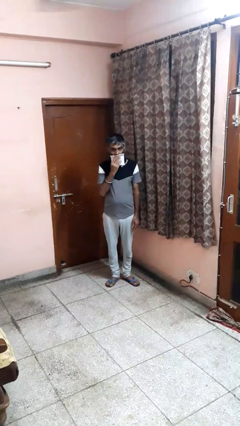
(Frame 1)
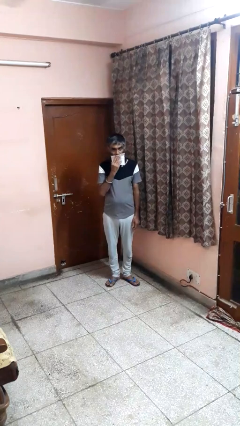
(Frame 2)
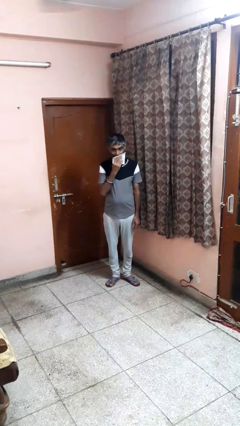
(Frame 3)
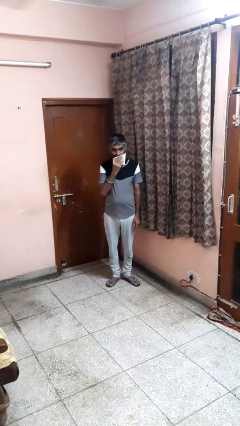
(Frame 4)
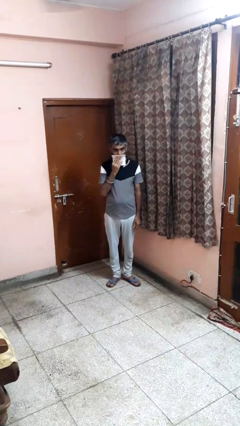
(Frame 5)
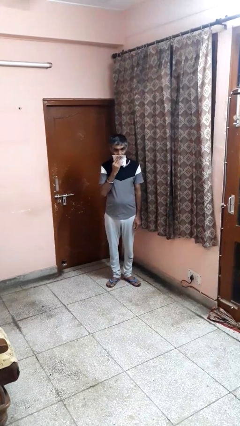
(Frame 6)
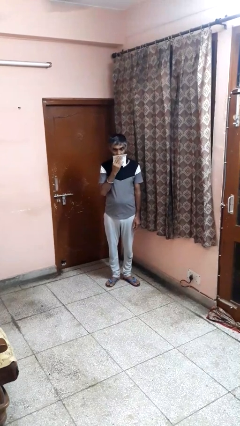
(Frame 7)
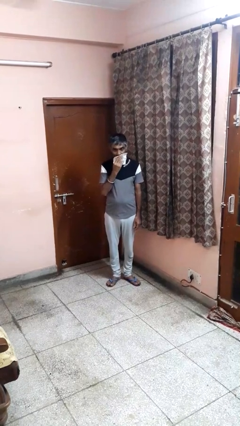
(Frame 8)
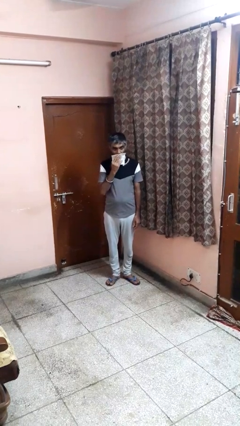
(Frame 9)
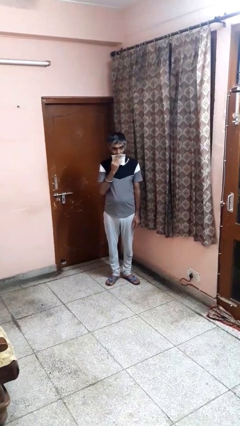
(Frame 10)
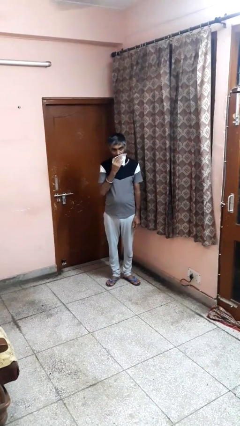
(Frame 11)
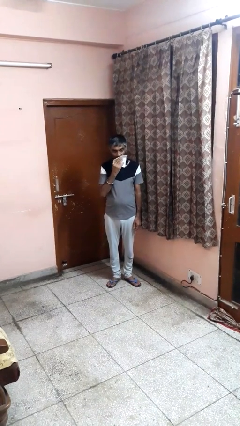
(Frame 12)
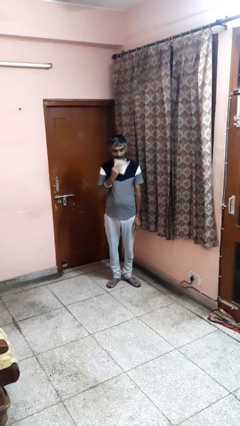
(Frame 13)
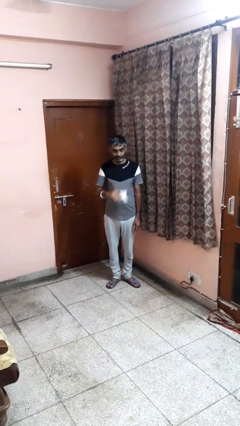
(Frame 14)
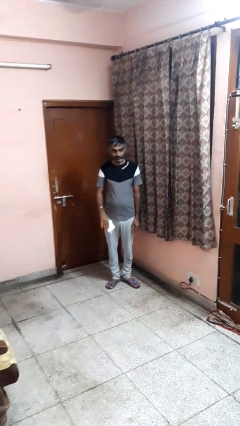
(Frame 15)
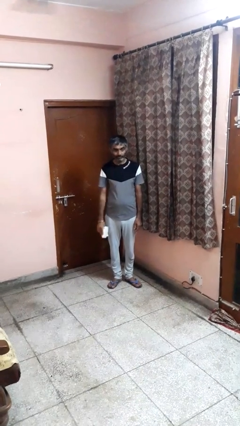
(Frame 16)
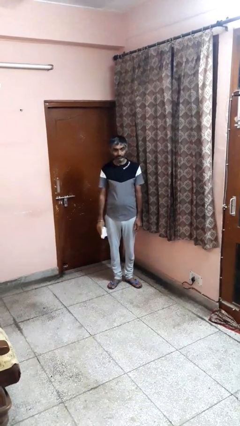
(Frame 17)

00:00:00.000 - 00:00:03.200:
person wipes mouth with napkin

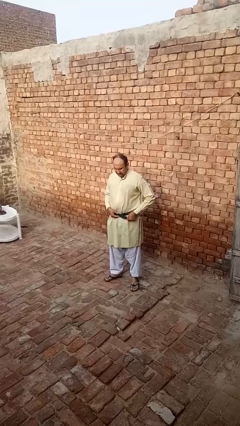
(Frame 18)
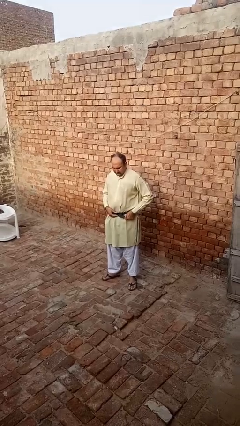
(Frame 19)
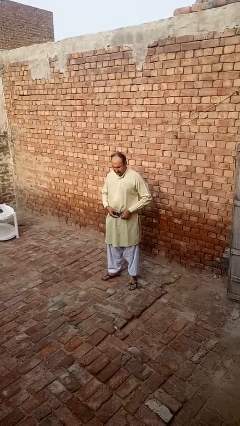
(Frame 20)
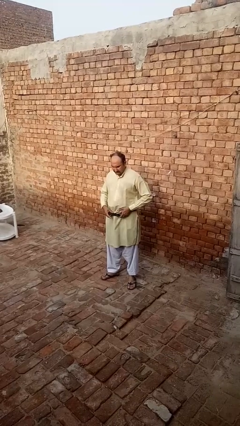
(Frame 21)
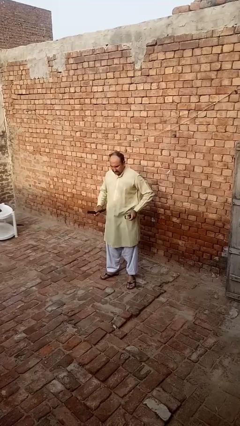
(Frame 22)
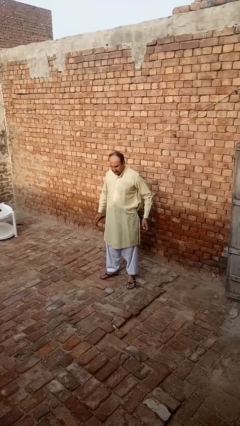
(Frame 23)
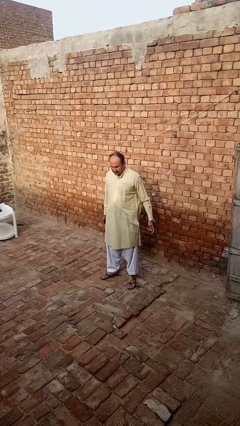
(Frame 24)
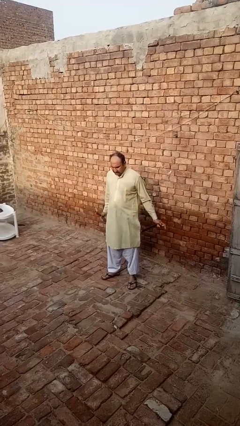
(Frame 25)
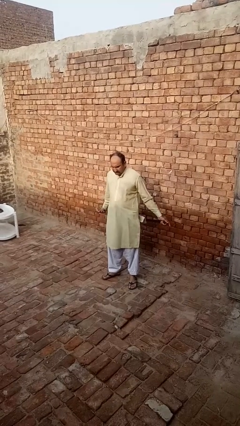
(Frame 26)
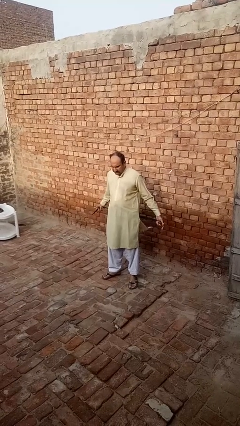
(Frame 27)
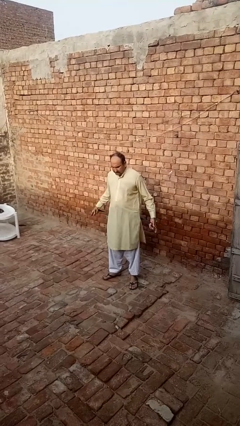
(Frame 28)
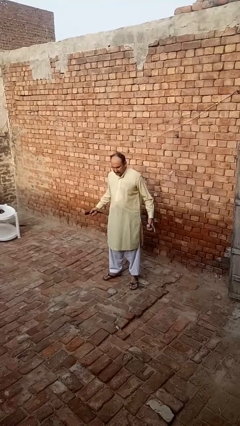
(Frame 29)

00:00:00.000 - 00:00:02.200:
person takes off belt

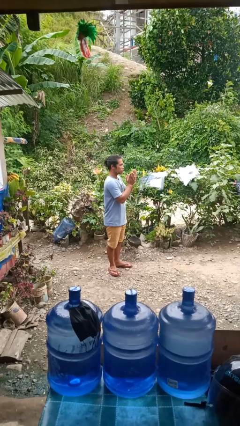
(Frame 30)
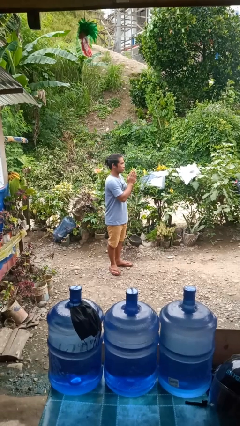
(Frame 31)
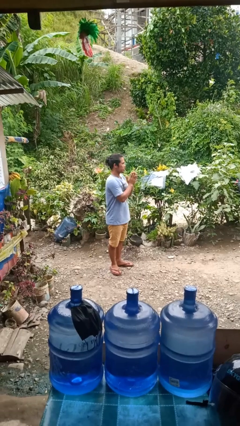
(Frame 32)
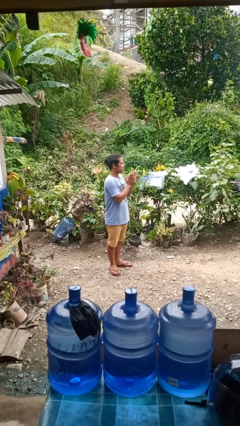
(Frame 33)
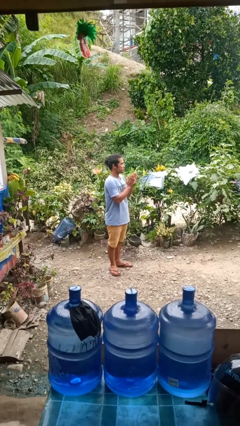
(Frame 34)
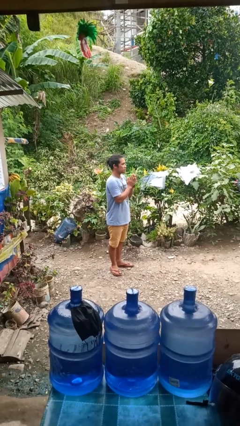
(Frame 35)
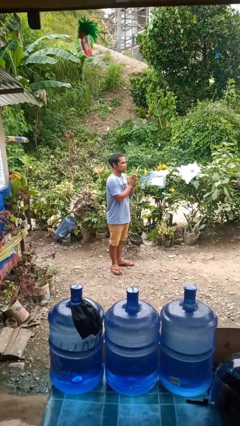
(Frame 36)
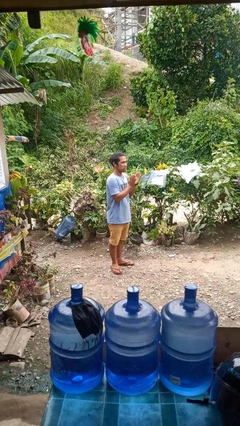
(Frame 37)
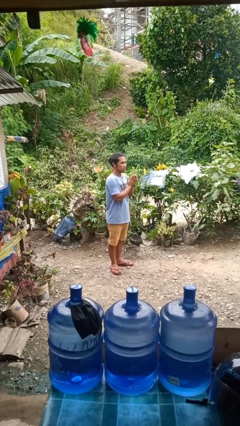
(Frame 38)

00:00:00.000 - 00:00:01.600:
person claps hands

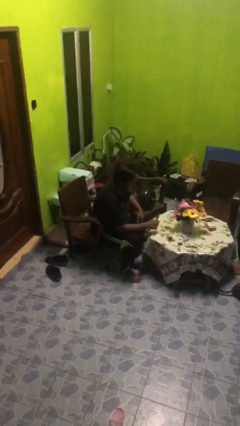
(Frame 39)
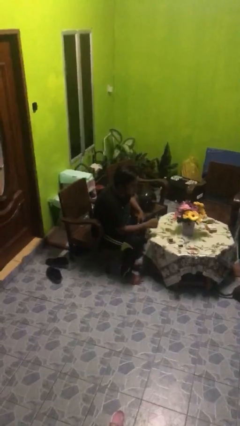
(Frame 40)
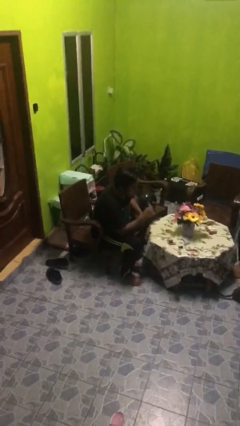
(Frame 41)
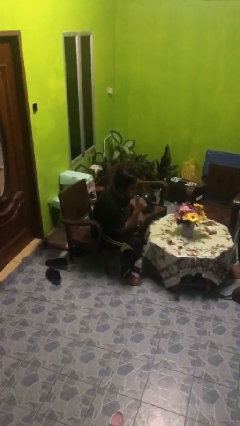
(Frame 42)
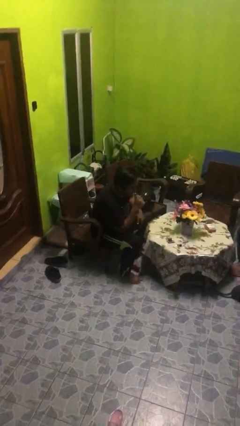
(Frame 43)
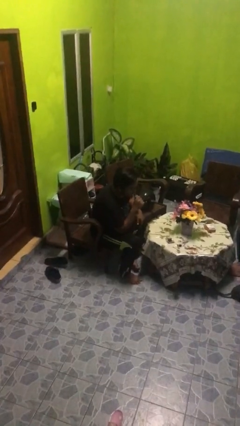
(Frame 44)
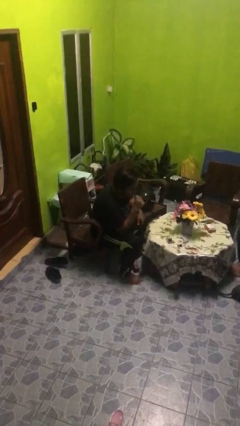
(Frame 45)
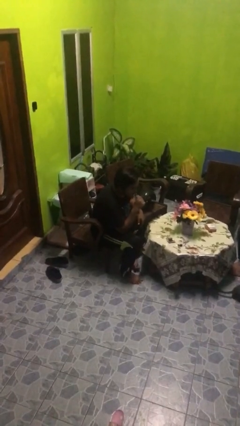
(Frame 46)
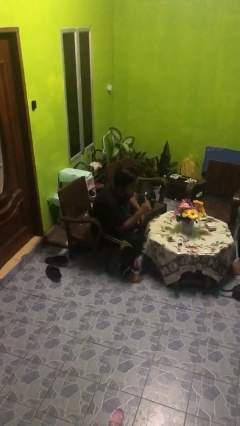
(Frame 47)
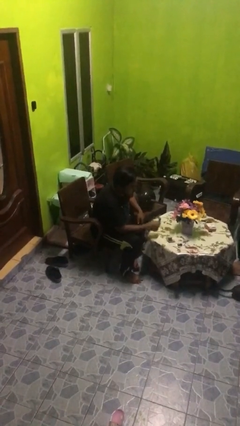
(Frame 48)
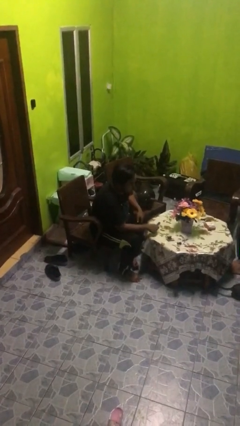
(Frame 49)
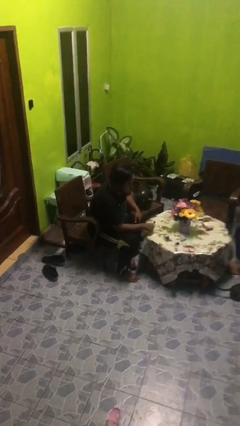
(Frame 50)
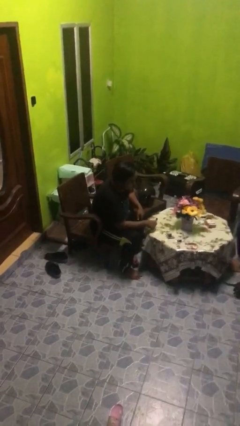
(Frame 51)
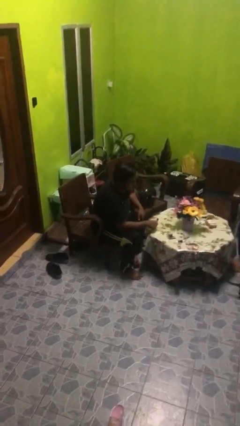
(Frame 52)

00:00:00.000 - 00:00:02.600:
person vapes

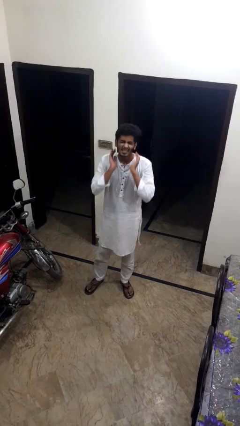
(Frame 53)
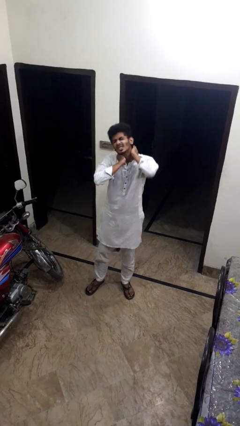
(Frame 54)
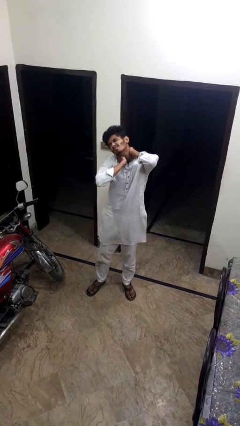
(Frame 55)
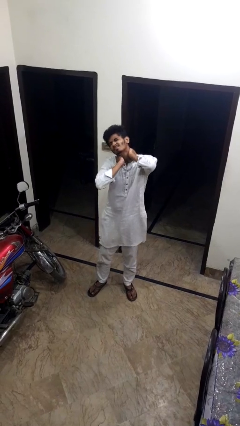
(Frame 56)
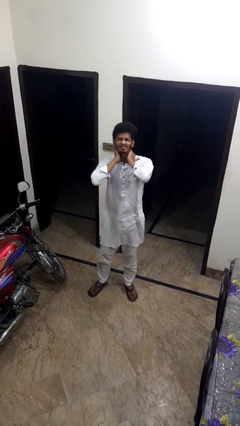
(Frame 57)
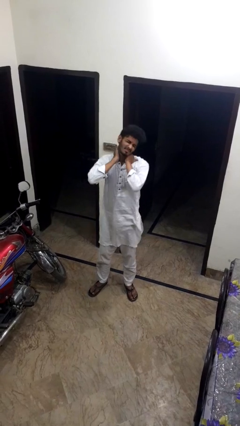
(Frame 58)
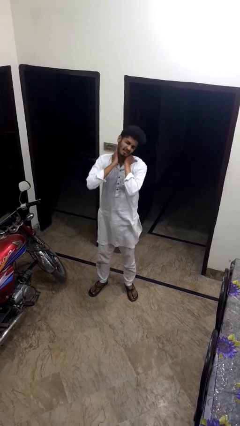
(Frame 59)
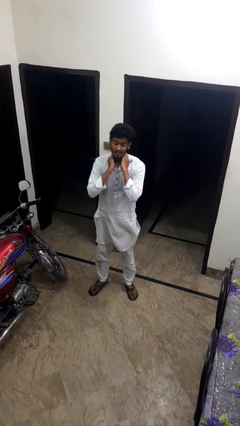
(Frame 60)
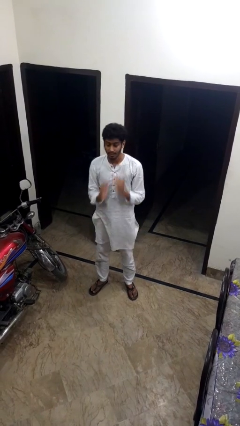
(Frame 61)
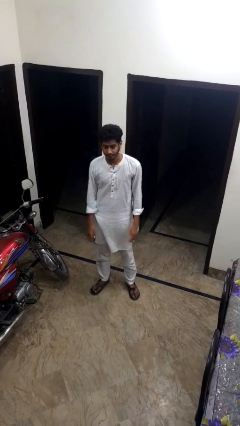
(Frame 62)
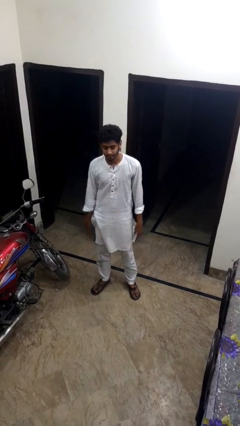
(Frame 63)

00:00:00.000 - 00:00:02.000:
person rubs neck

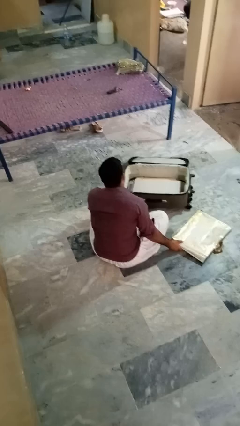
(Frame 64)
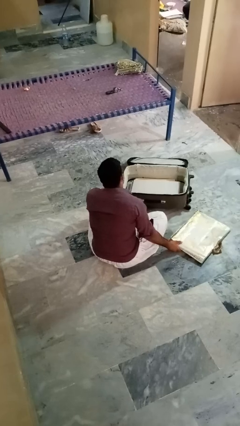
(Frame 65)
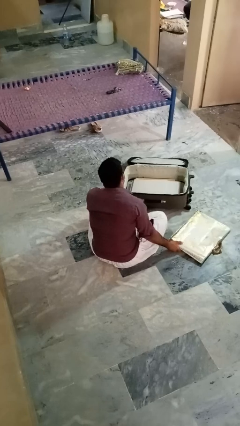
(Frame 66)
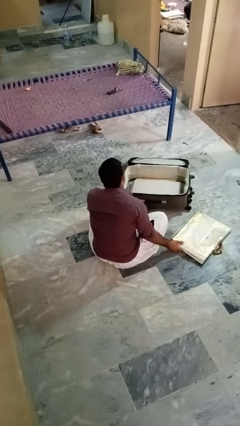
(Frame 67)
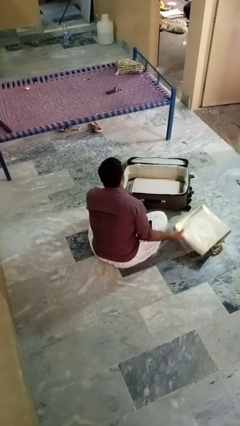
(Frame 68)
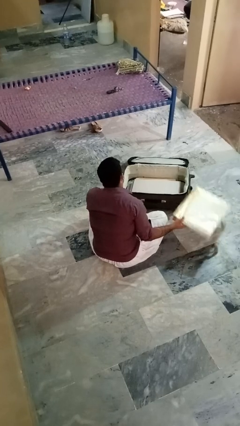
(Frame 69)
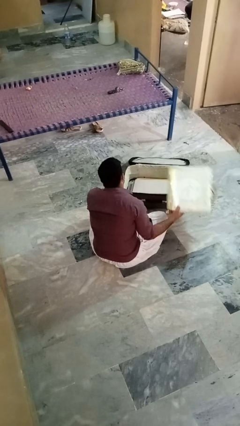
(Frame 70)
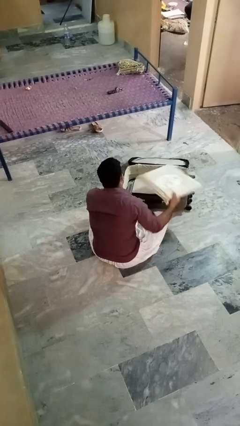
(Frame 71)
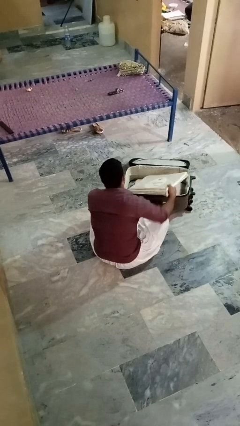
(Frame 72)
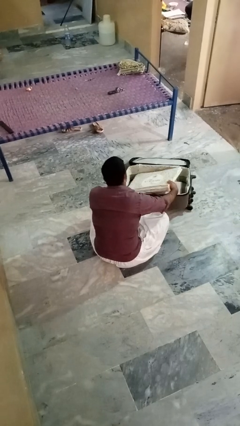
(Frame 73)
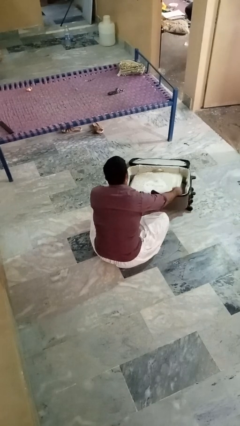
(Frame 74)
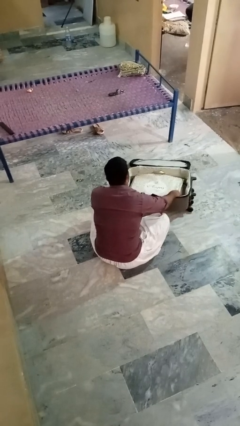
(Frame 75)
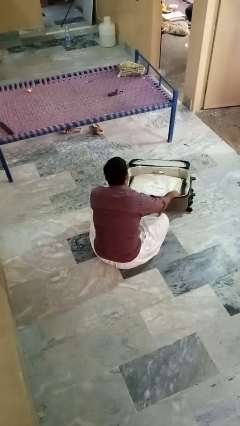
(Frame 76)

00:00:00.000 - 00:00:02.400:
person puts object into bag

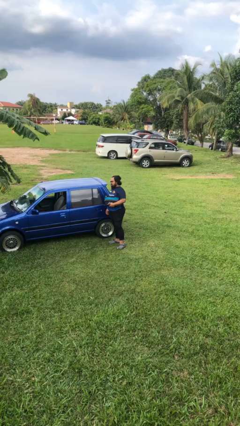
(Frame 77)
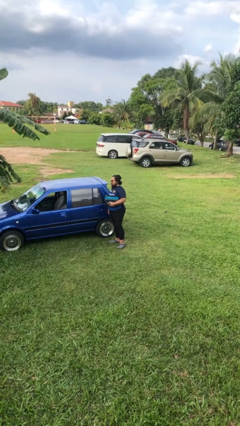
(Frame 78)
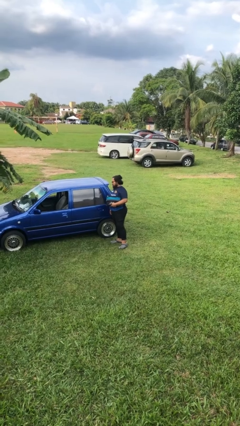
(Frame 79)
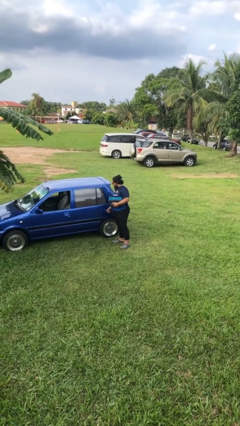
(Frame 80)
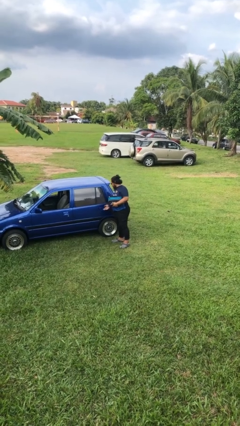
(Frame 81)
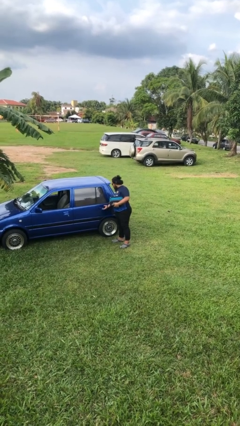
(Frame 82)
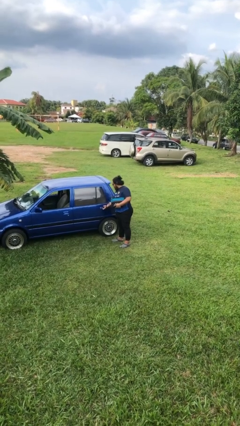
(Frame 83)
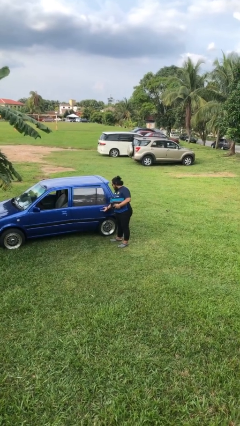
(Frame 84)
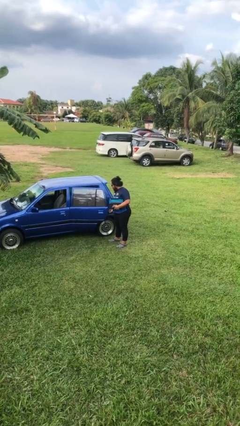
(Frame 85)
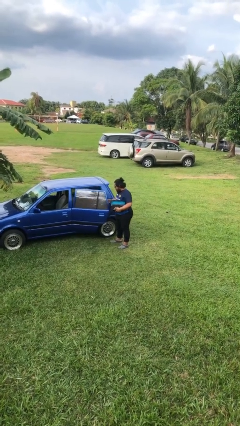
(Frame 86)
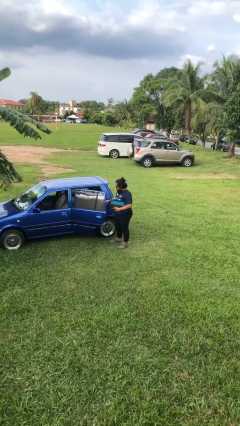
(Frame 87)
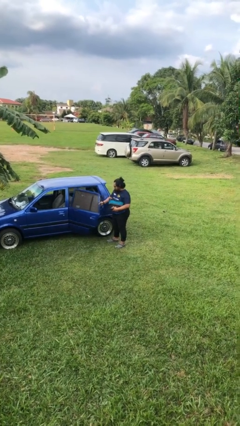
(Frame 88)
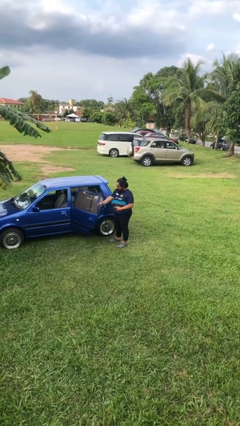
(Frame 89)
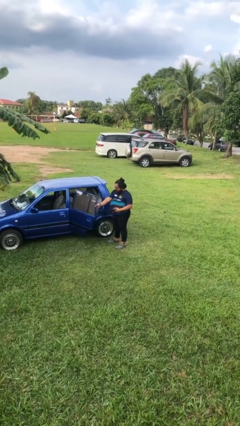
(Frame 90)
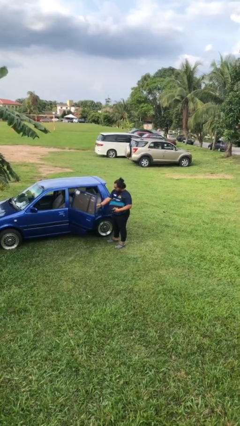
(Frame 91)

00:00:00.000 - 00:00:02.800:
person opens car door

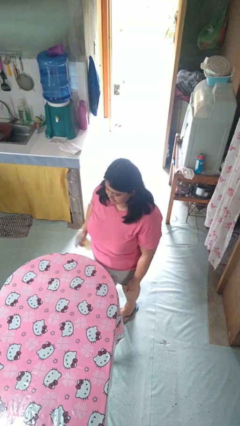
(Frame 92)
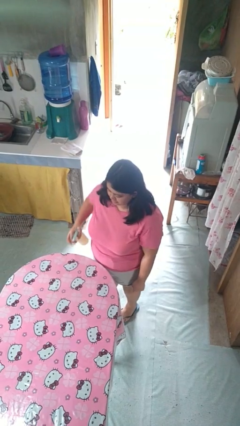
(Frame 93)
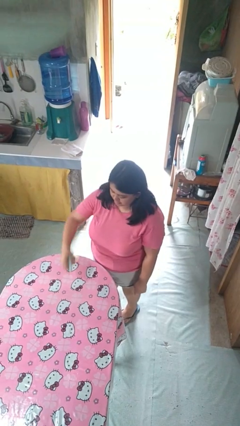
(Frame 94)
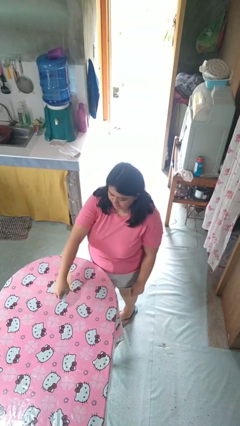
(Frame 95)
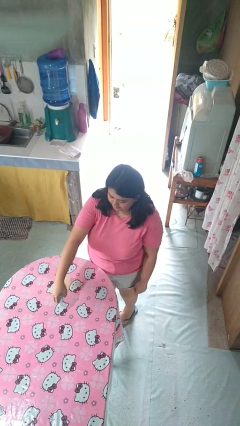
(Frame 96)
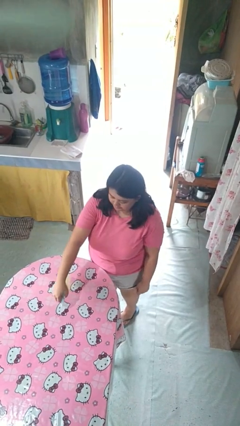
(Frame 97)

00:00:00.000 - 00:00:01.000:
person sprays from bottle
